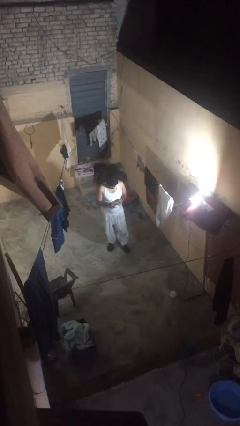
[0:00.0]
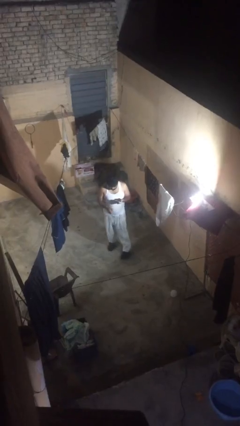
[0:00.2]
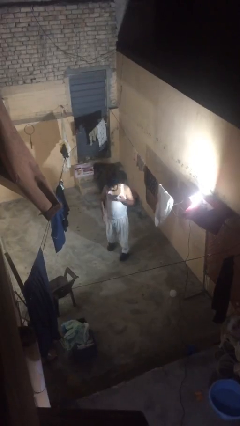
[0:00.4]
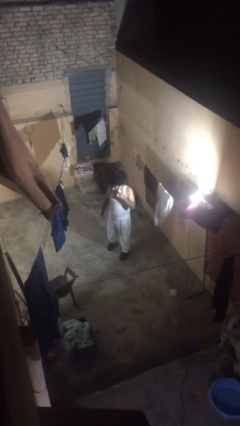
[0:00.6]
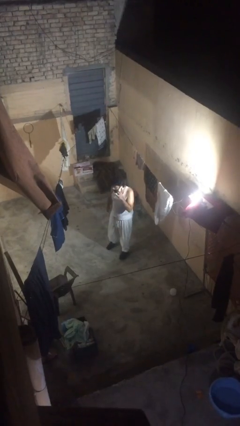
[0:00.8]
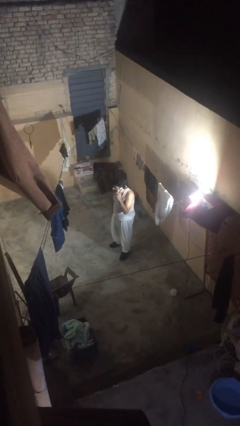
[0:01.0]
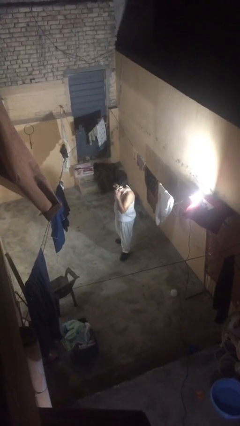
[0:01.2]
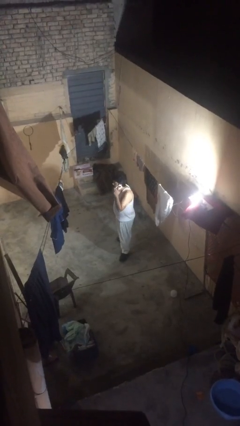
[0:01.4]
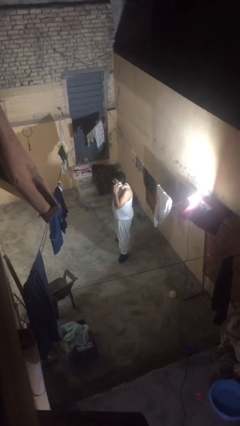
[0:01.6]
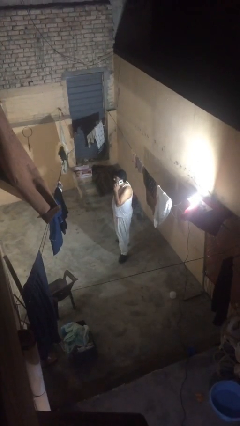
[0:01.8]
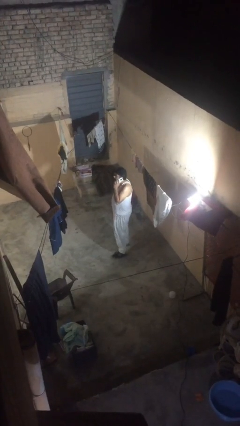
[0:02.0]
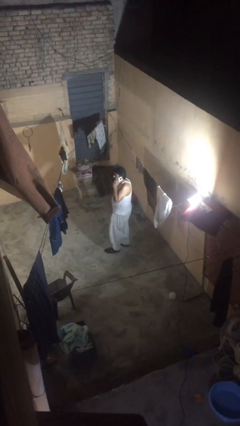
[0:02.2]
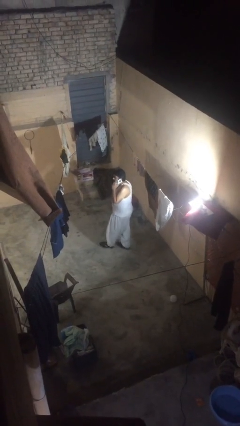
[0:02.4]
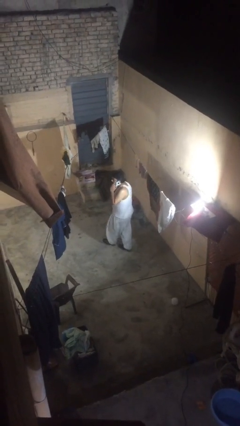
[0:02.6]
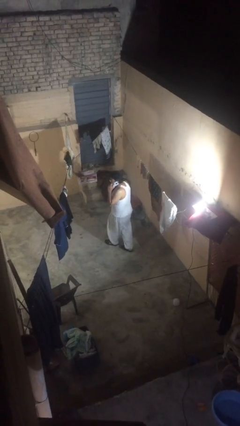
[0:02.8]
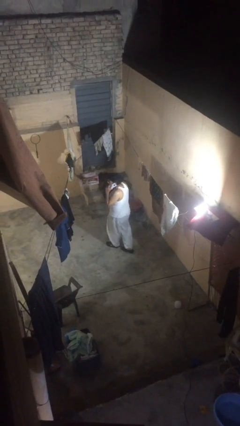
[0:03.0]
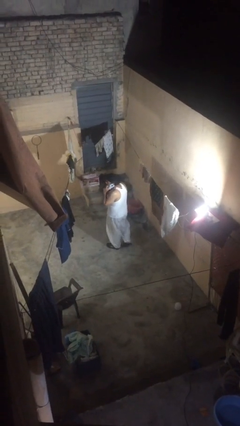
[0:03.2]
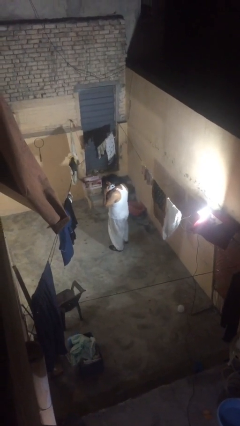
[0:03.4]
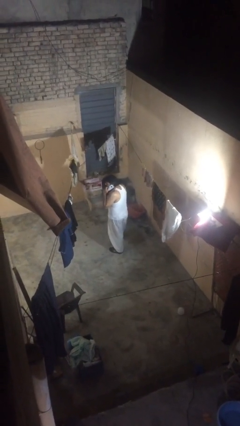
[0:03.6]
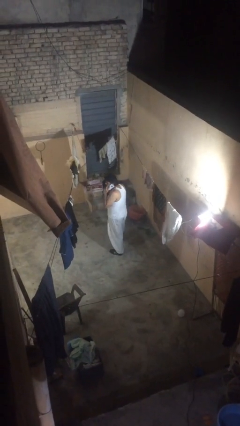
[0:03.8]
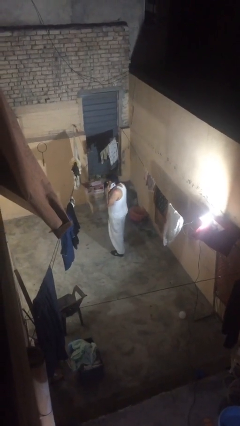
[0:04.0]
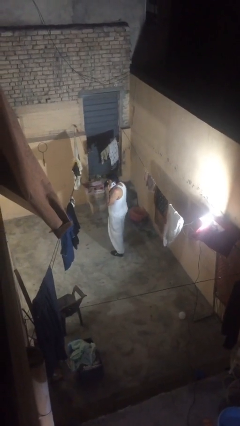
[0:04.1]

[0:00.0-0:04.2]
person talks on phone

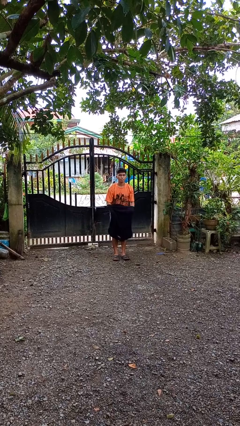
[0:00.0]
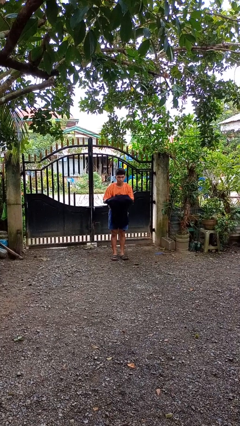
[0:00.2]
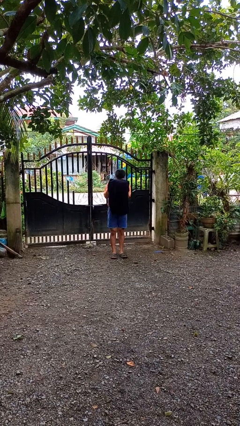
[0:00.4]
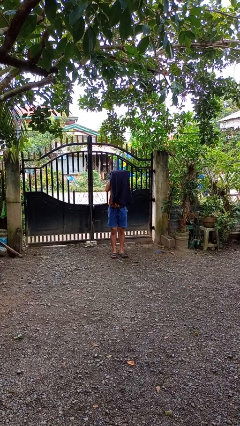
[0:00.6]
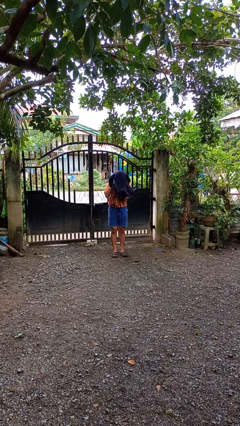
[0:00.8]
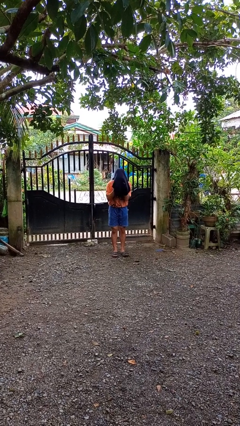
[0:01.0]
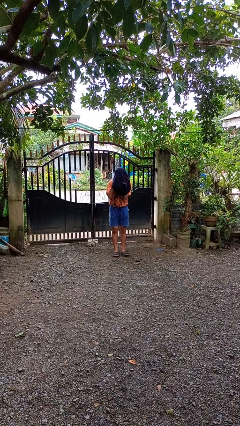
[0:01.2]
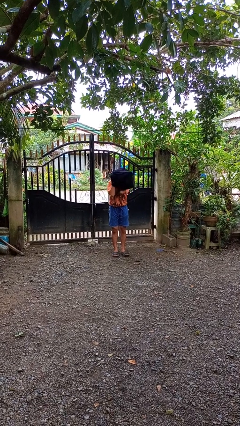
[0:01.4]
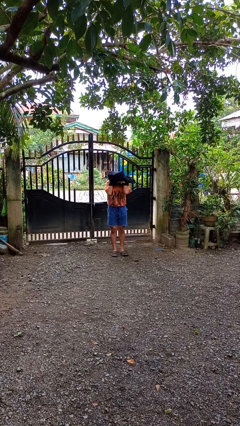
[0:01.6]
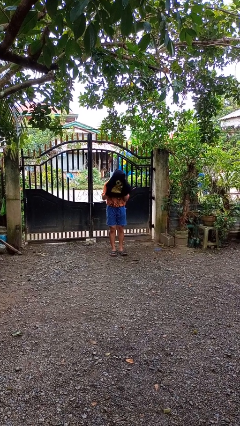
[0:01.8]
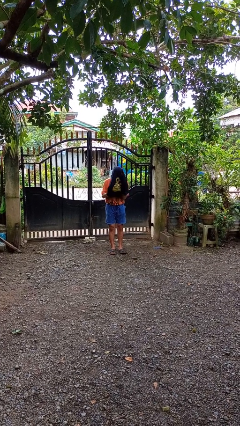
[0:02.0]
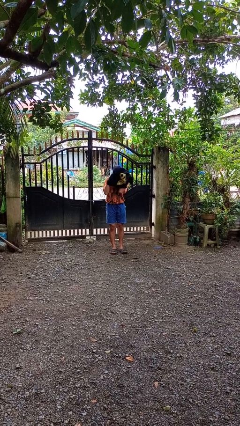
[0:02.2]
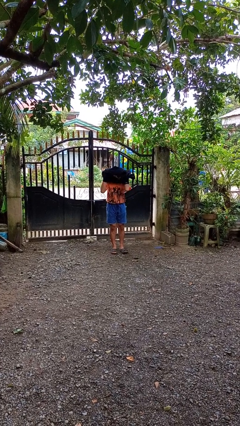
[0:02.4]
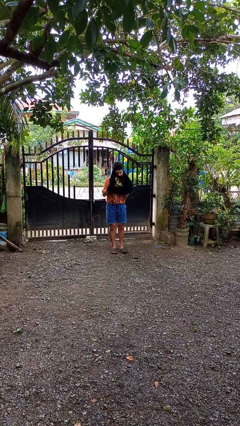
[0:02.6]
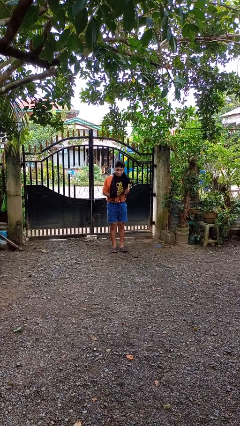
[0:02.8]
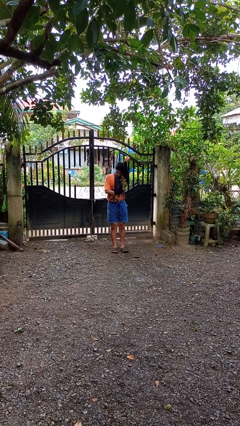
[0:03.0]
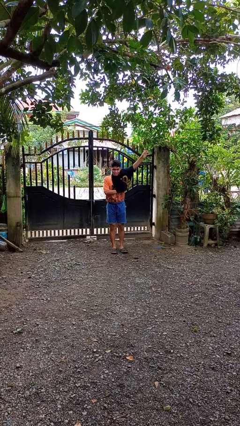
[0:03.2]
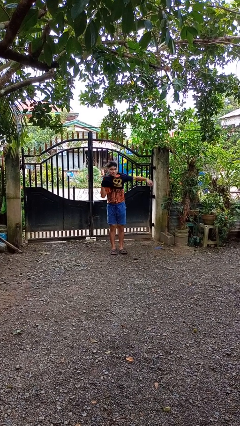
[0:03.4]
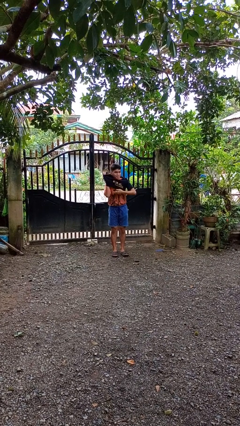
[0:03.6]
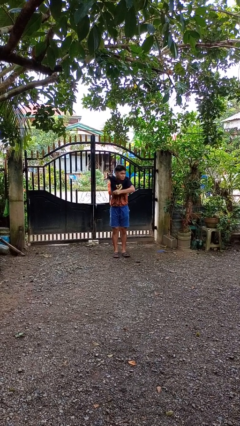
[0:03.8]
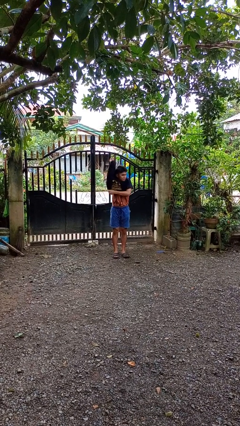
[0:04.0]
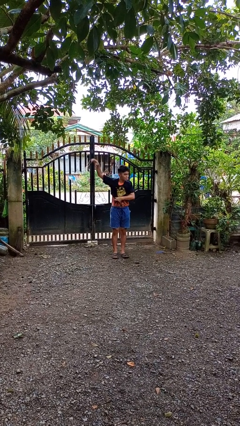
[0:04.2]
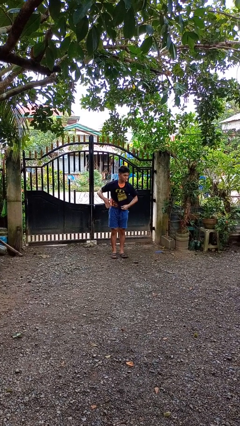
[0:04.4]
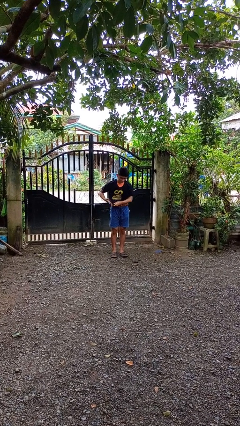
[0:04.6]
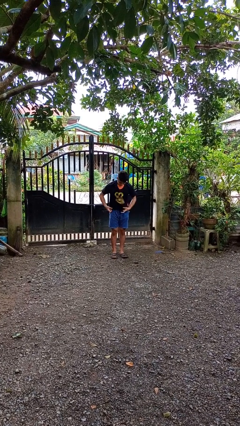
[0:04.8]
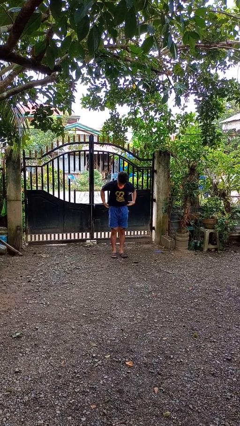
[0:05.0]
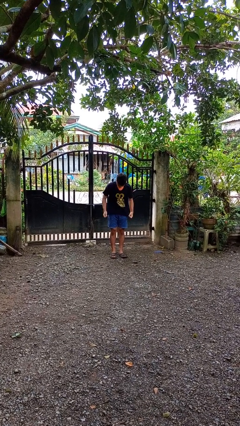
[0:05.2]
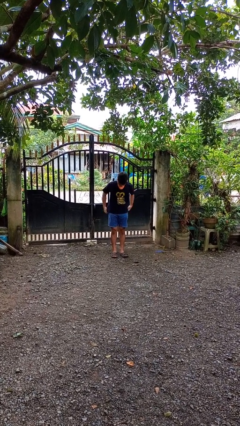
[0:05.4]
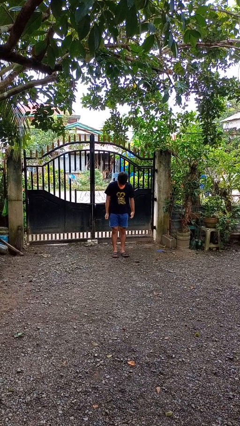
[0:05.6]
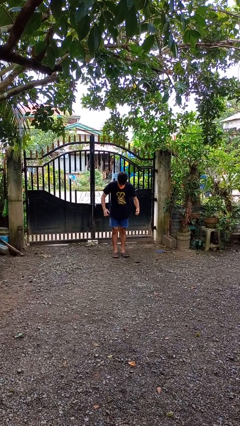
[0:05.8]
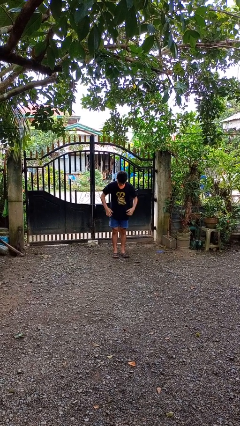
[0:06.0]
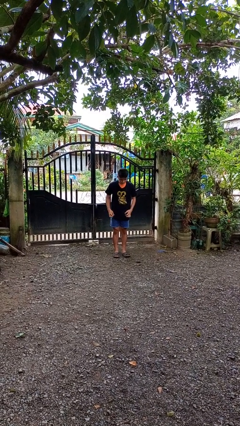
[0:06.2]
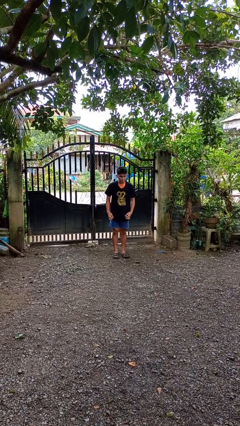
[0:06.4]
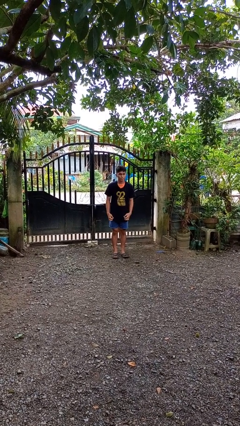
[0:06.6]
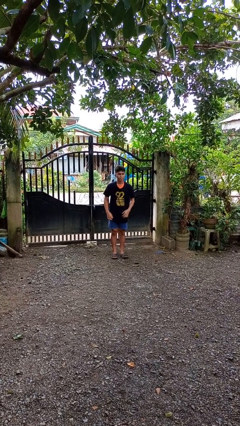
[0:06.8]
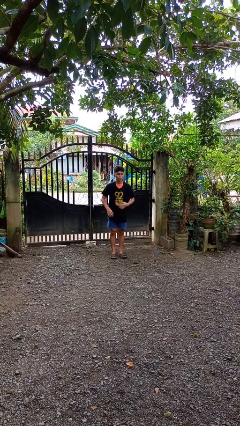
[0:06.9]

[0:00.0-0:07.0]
person puts on shirt

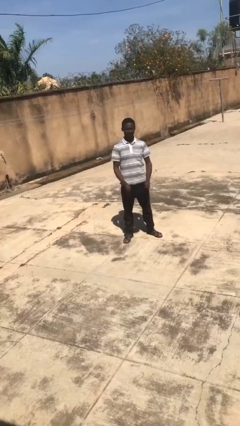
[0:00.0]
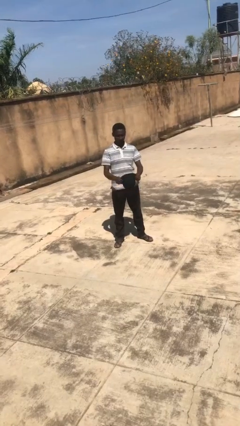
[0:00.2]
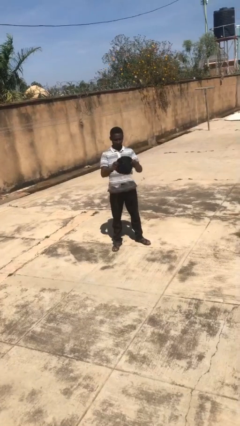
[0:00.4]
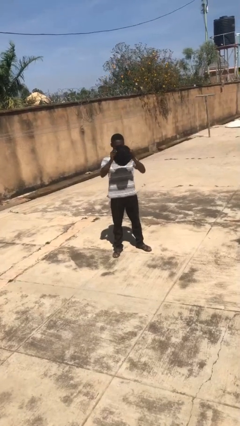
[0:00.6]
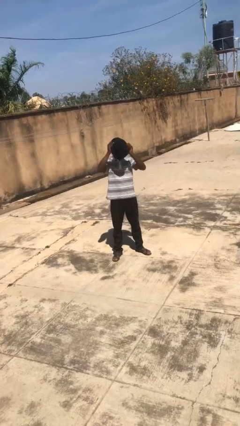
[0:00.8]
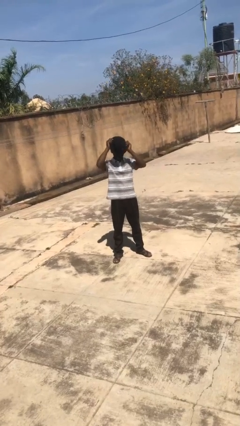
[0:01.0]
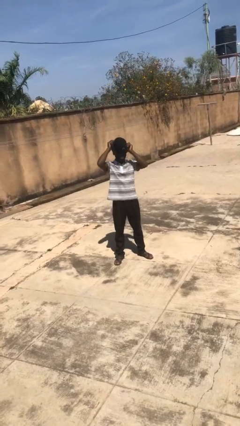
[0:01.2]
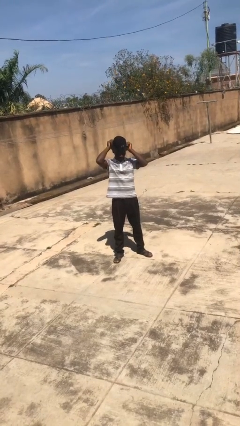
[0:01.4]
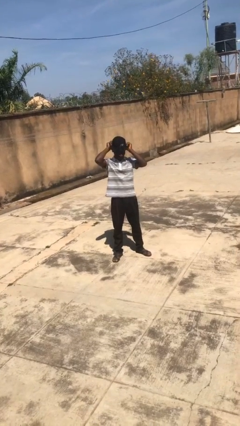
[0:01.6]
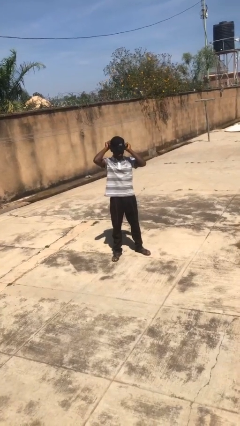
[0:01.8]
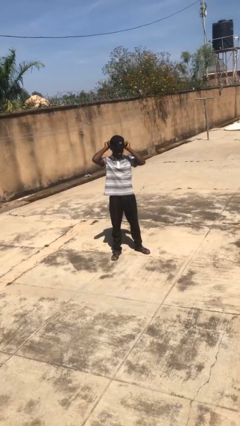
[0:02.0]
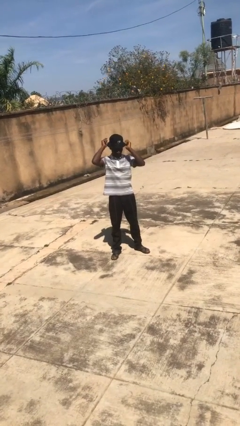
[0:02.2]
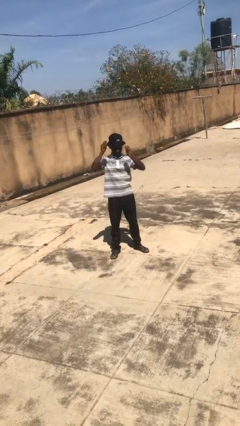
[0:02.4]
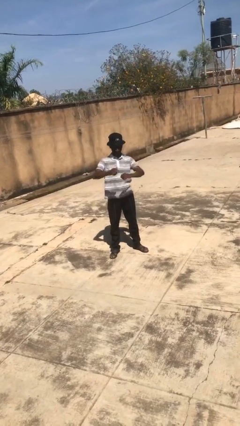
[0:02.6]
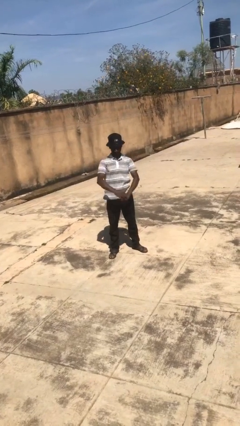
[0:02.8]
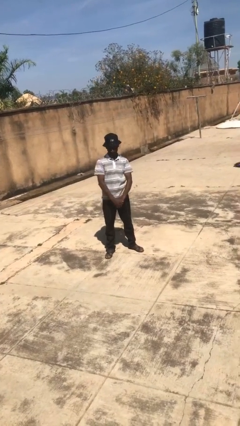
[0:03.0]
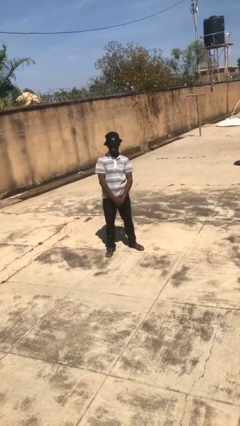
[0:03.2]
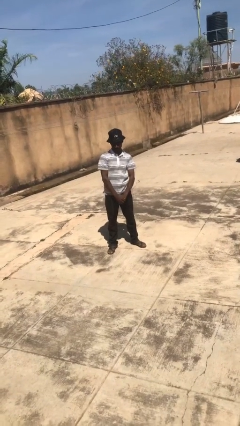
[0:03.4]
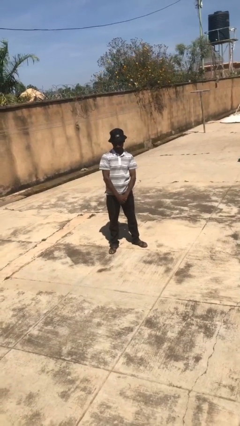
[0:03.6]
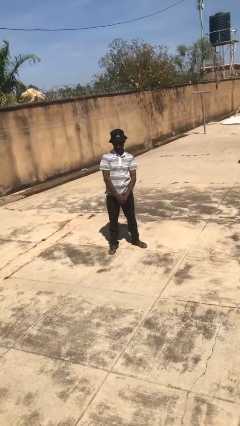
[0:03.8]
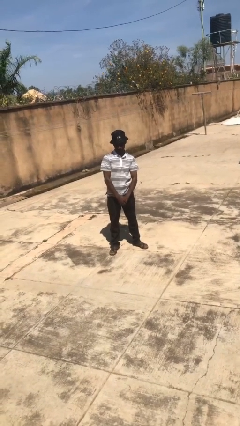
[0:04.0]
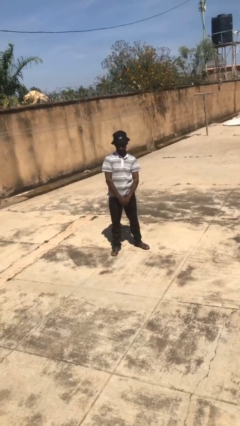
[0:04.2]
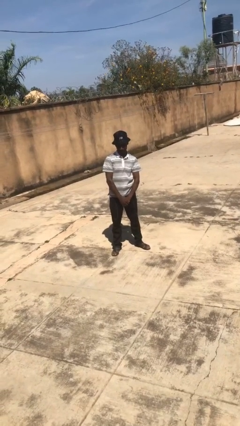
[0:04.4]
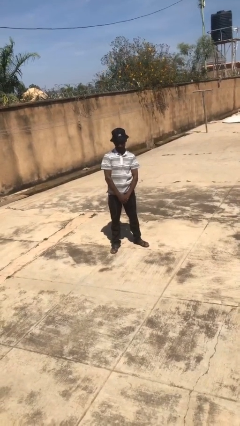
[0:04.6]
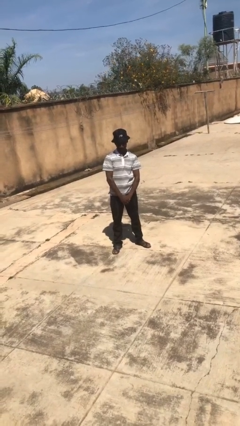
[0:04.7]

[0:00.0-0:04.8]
person puts on hat

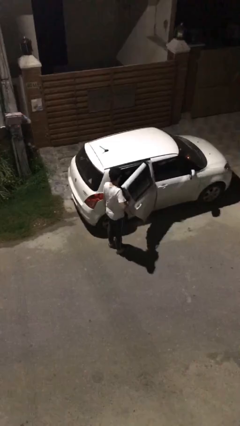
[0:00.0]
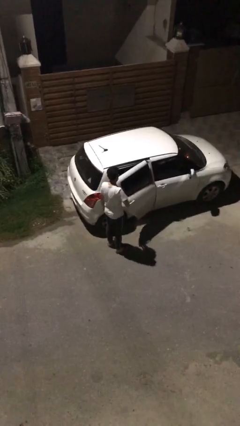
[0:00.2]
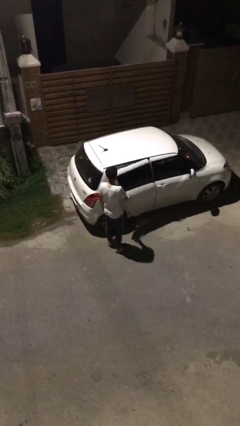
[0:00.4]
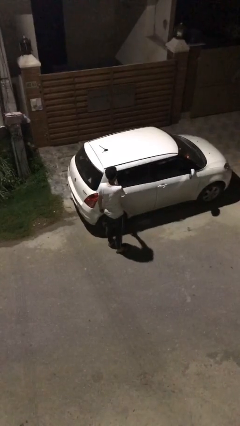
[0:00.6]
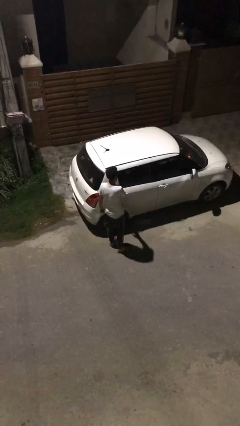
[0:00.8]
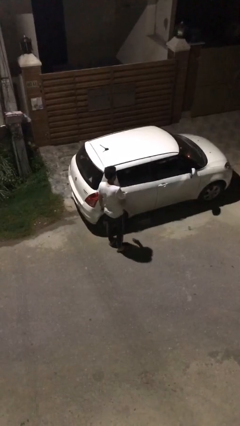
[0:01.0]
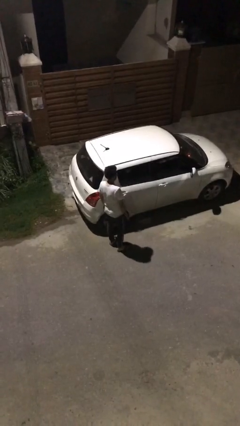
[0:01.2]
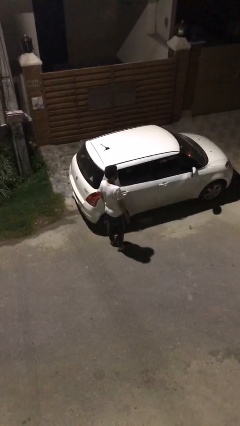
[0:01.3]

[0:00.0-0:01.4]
person closes car door

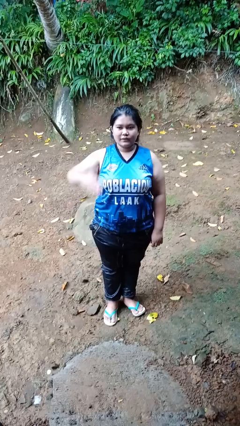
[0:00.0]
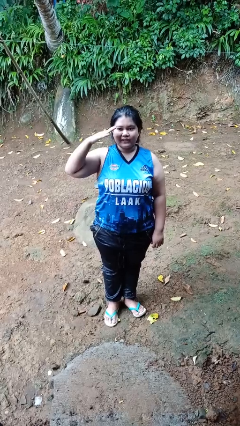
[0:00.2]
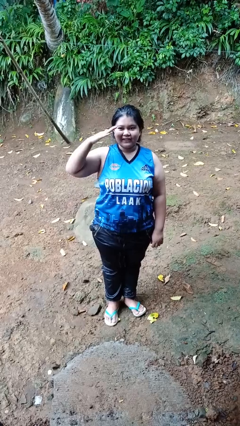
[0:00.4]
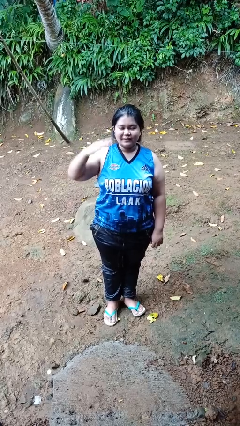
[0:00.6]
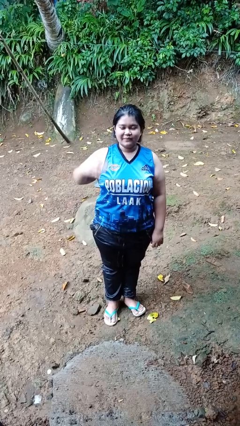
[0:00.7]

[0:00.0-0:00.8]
person salutes
